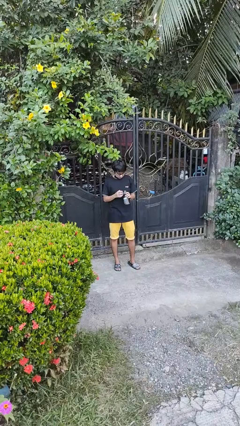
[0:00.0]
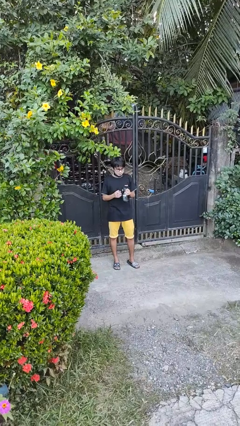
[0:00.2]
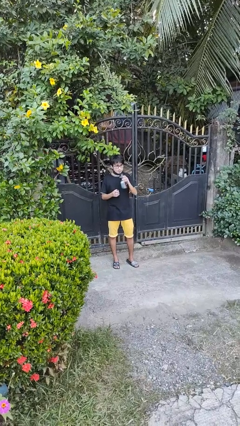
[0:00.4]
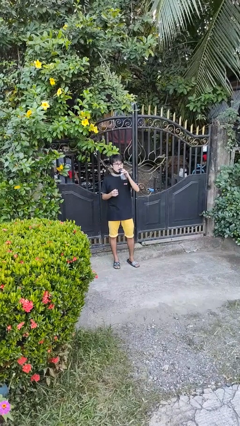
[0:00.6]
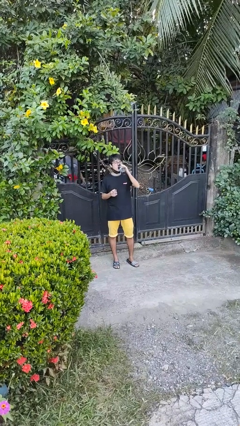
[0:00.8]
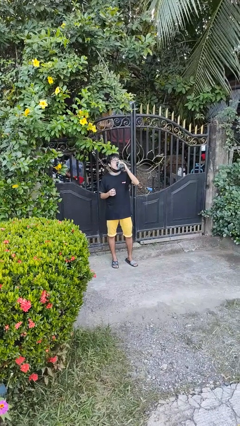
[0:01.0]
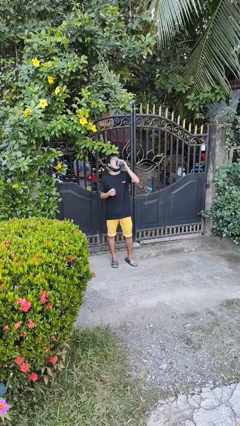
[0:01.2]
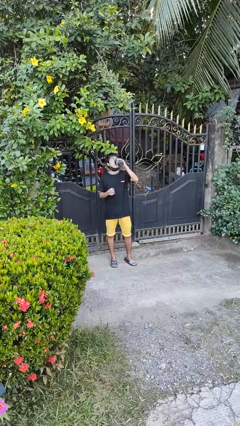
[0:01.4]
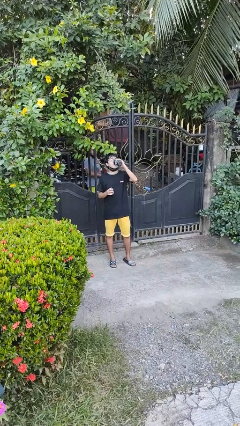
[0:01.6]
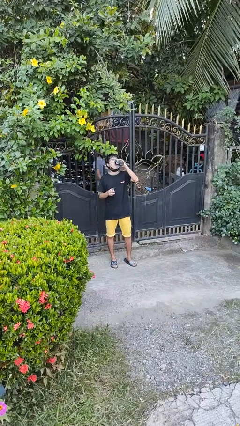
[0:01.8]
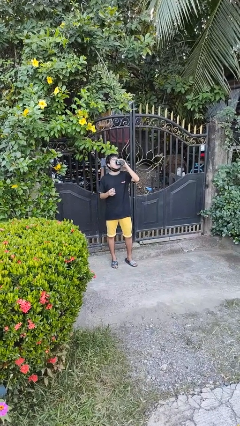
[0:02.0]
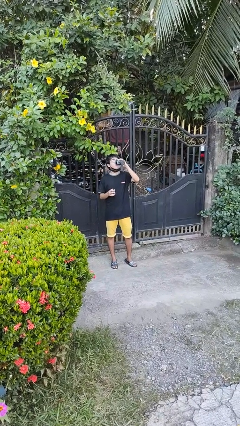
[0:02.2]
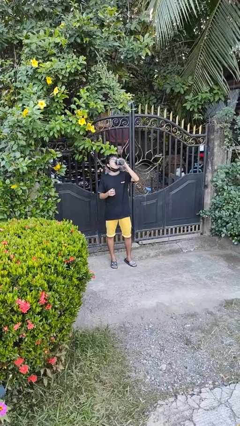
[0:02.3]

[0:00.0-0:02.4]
person drinks from bottle

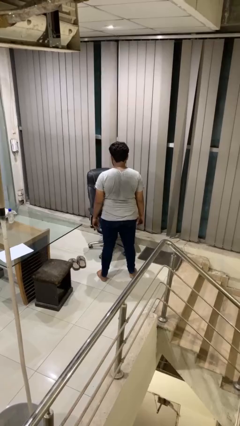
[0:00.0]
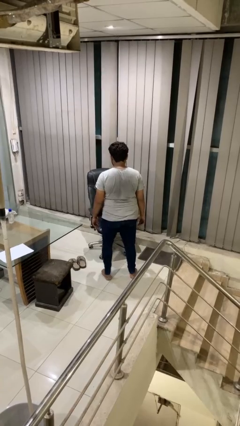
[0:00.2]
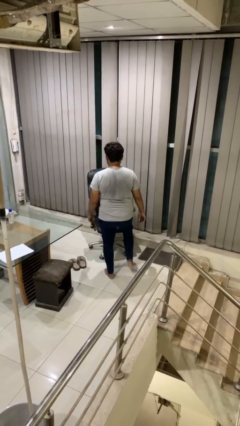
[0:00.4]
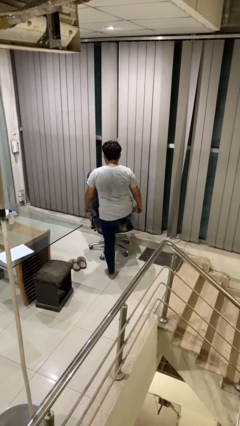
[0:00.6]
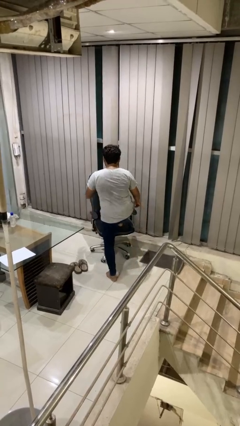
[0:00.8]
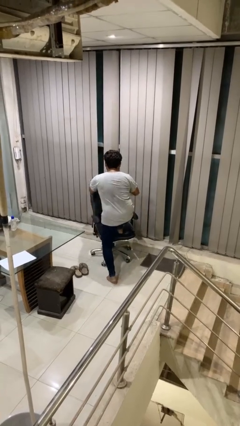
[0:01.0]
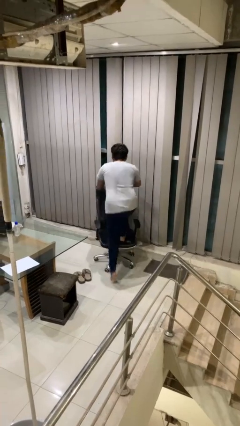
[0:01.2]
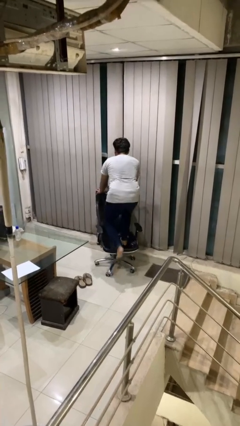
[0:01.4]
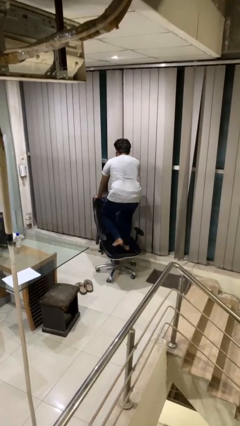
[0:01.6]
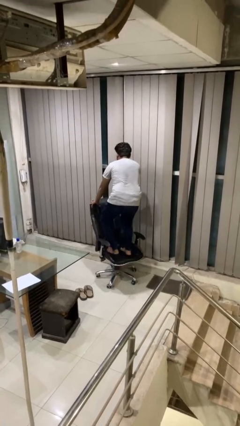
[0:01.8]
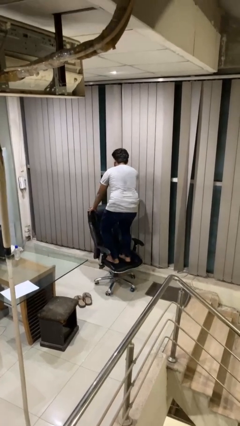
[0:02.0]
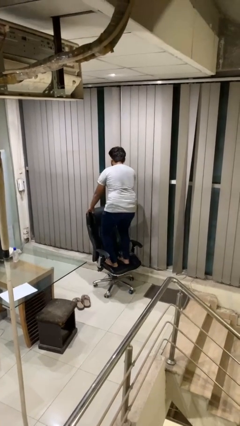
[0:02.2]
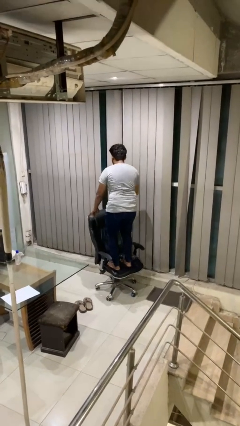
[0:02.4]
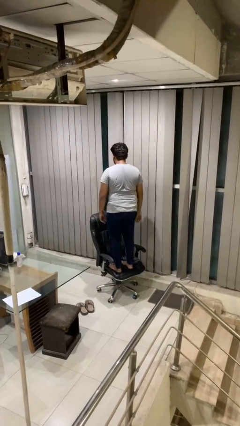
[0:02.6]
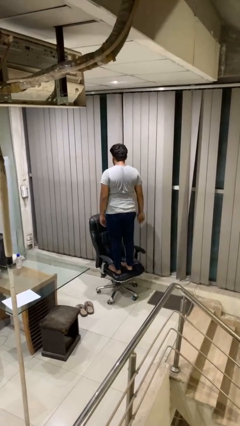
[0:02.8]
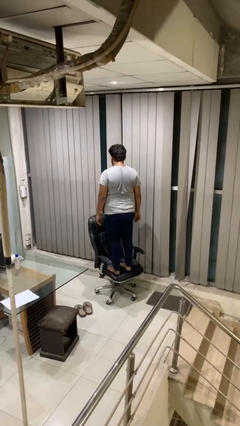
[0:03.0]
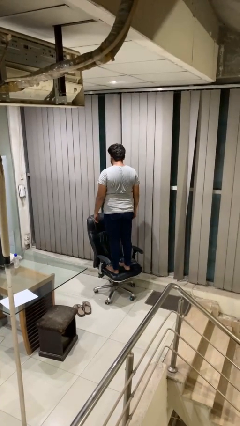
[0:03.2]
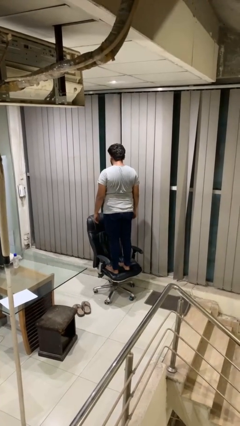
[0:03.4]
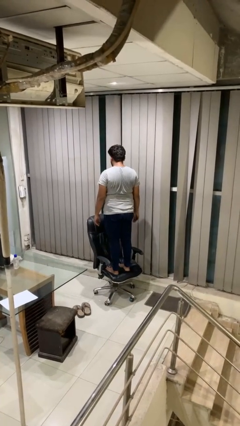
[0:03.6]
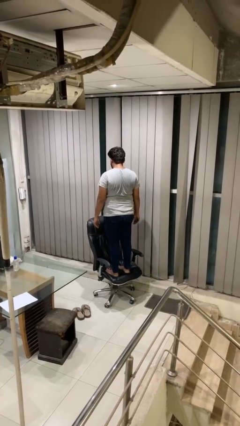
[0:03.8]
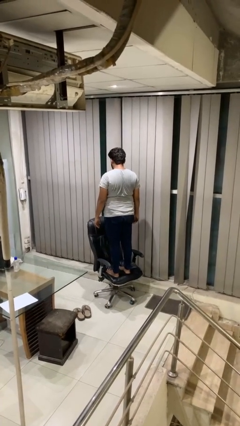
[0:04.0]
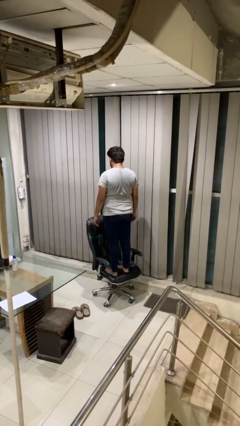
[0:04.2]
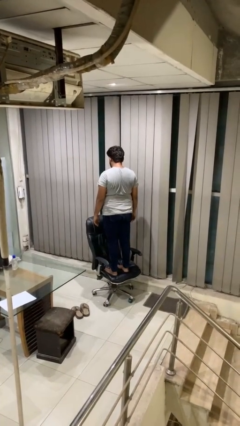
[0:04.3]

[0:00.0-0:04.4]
person climbs on chair

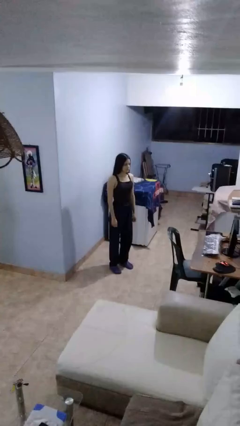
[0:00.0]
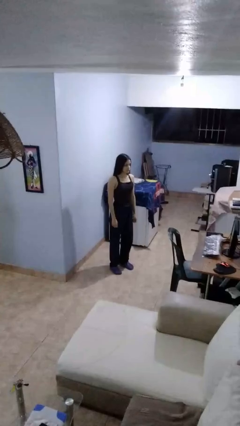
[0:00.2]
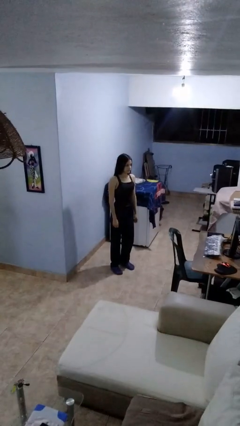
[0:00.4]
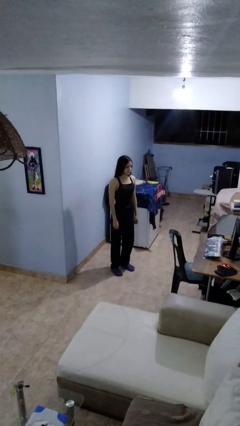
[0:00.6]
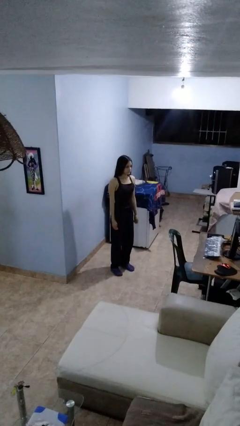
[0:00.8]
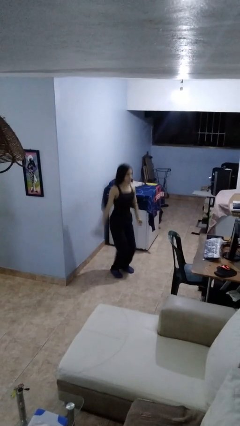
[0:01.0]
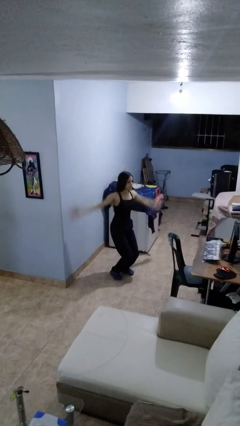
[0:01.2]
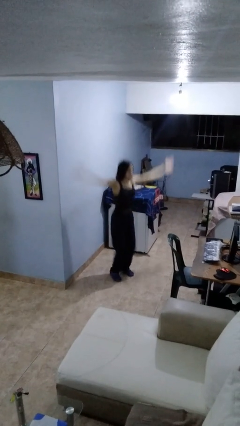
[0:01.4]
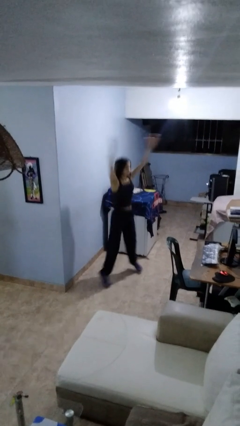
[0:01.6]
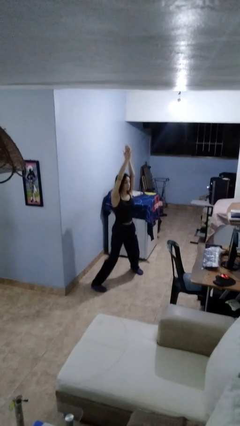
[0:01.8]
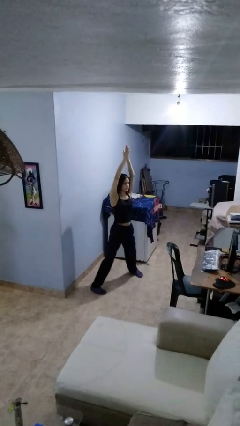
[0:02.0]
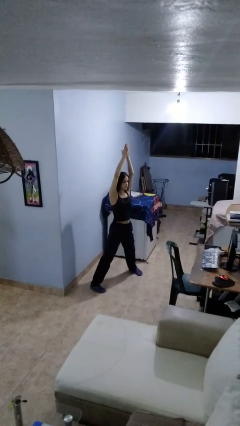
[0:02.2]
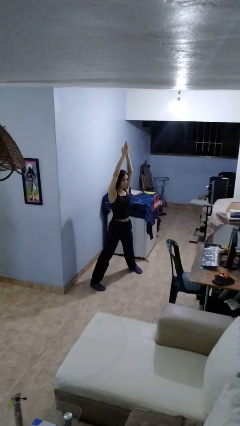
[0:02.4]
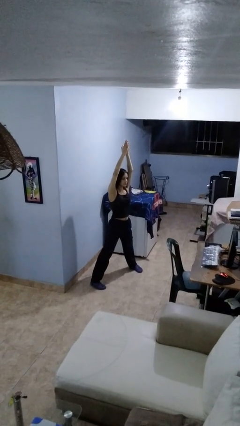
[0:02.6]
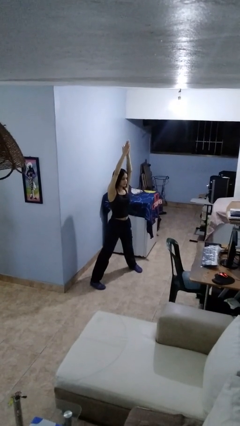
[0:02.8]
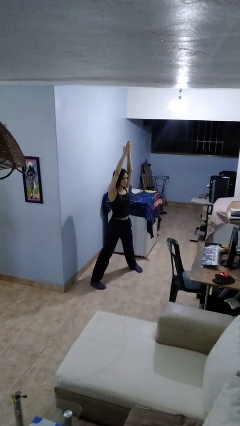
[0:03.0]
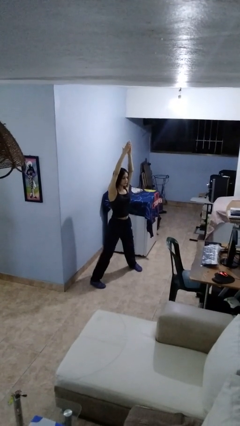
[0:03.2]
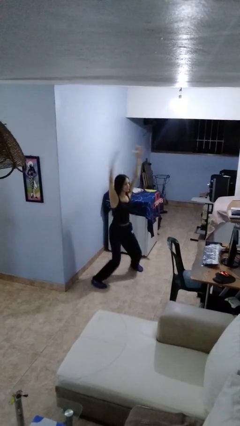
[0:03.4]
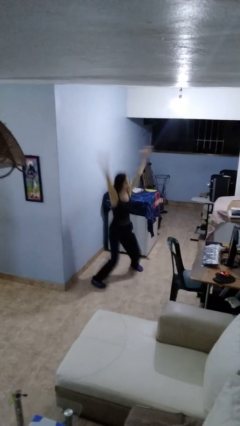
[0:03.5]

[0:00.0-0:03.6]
person exercises with jumping jacks

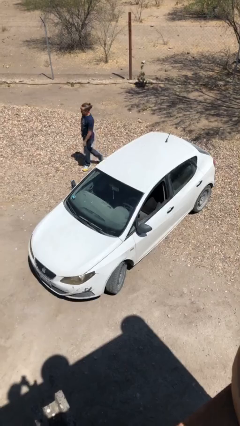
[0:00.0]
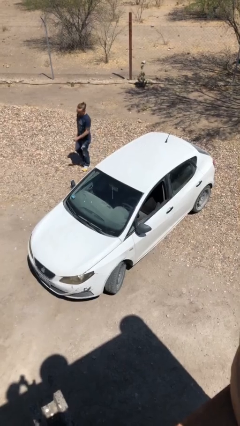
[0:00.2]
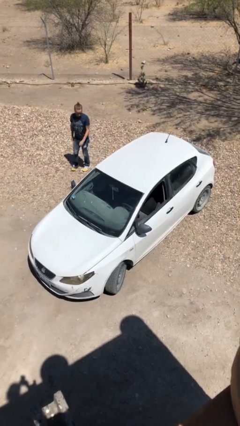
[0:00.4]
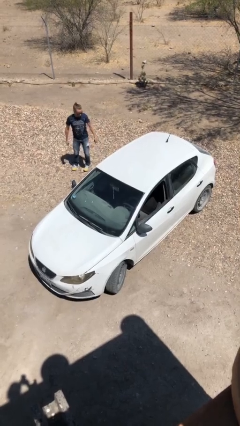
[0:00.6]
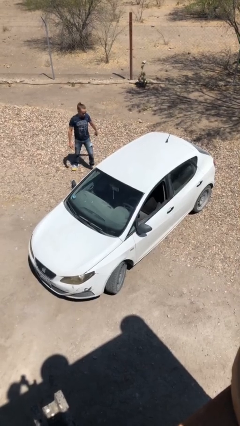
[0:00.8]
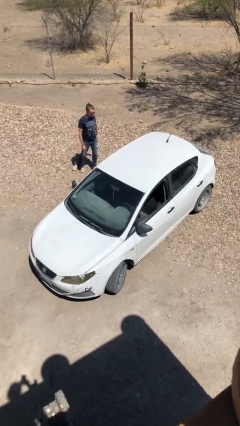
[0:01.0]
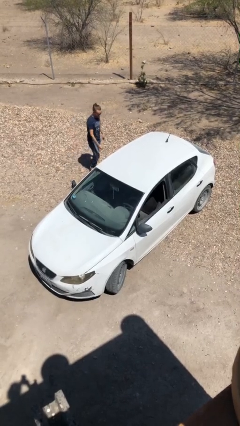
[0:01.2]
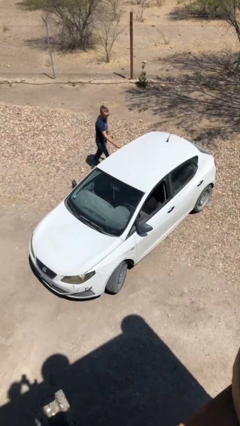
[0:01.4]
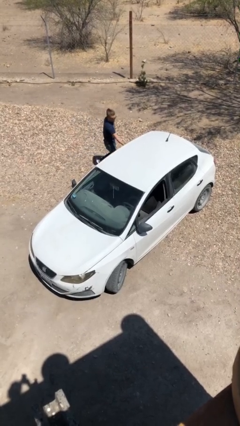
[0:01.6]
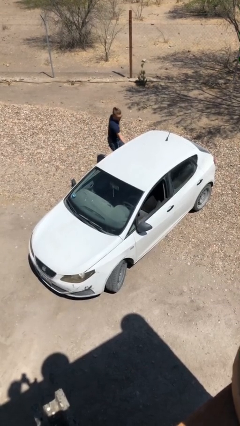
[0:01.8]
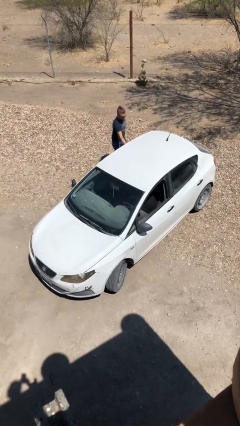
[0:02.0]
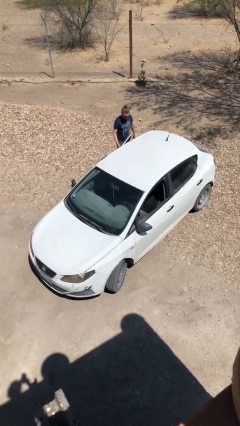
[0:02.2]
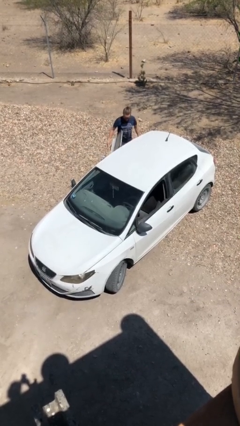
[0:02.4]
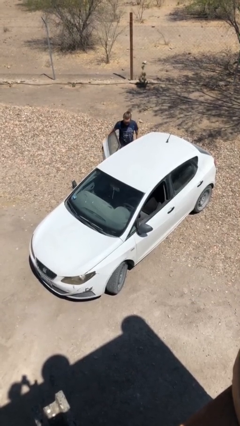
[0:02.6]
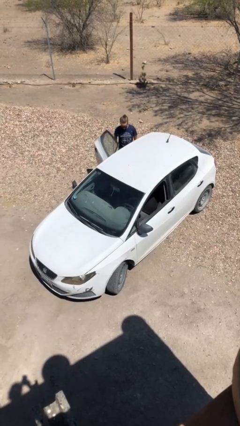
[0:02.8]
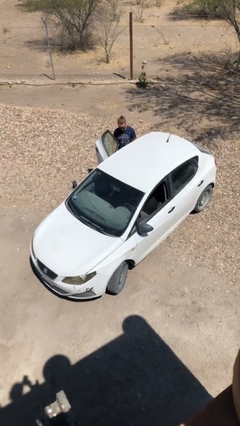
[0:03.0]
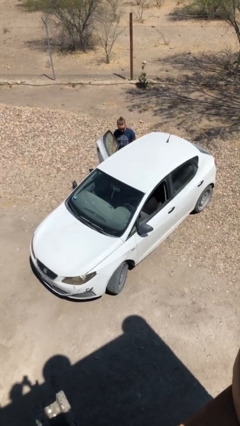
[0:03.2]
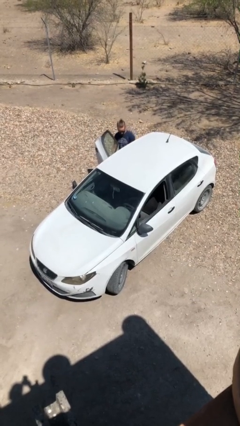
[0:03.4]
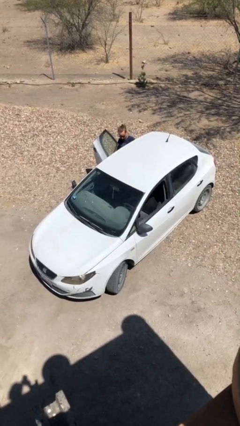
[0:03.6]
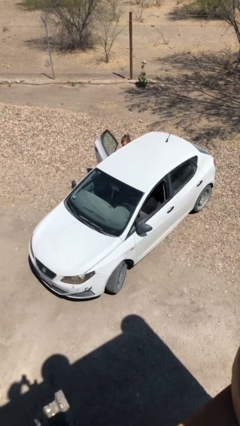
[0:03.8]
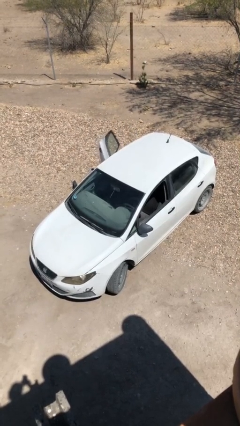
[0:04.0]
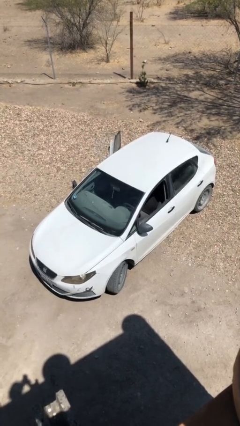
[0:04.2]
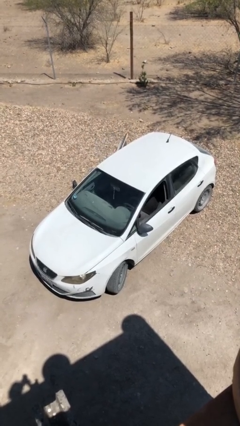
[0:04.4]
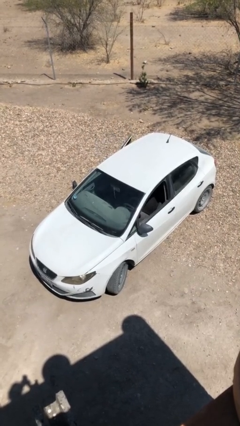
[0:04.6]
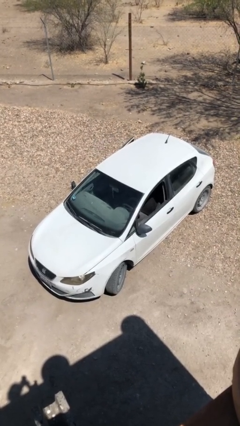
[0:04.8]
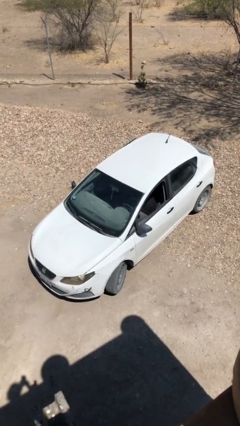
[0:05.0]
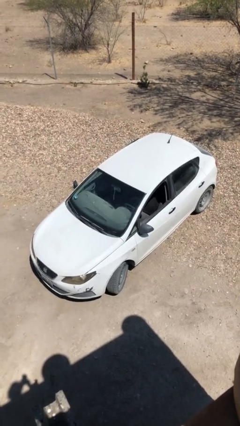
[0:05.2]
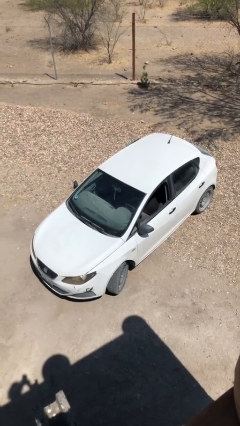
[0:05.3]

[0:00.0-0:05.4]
car picks up person

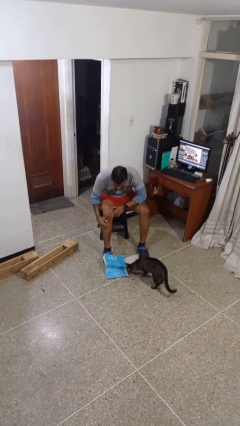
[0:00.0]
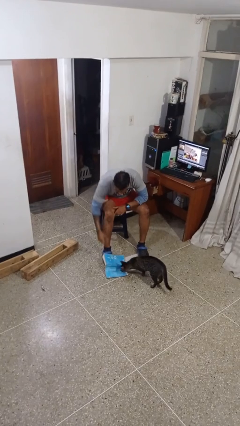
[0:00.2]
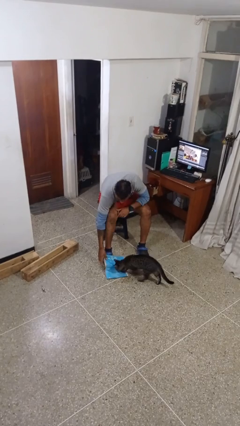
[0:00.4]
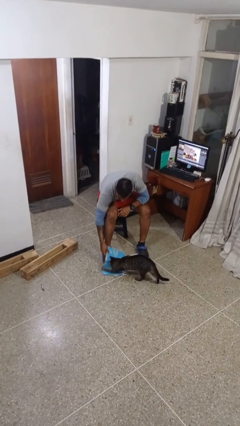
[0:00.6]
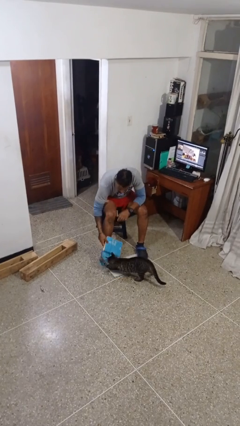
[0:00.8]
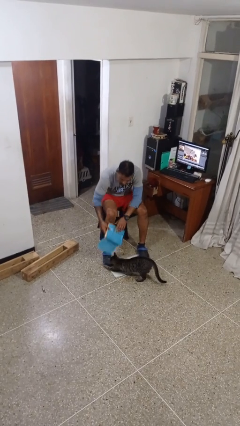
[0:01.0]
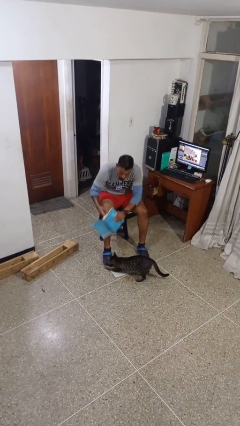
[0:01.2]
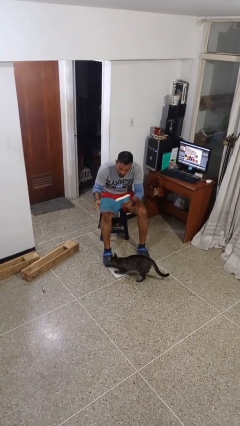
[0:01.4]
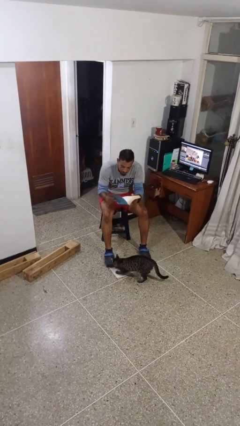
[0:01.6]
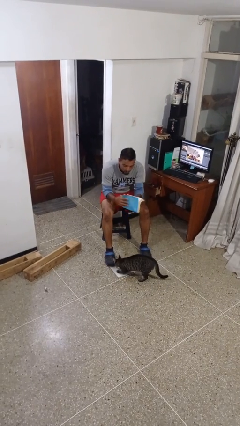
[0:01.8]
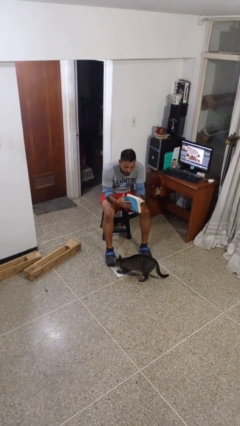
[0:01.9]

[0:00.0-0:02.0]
person picks up object from floor
